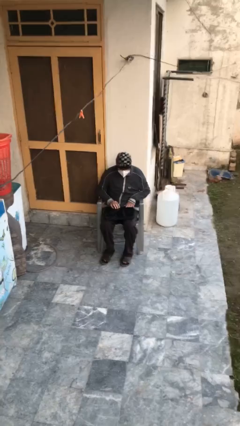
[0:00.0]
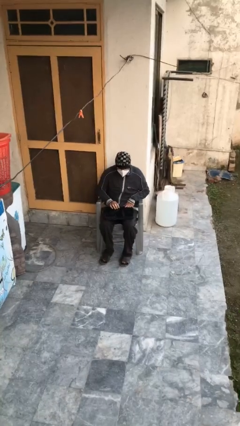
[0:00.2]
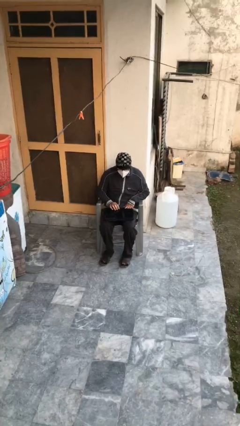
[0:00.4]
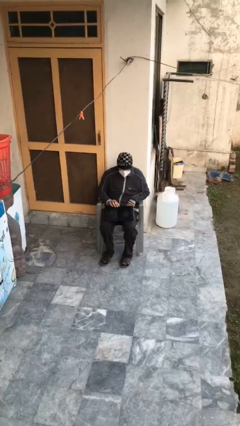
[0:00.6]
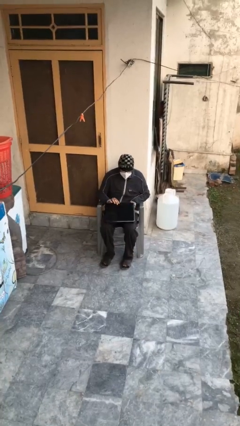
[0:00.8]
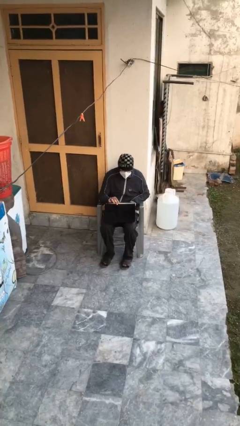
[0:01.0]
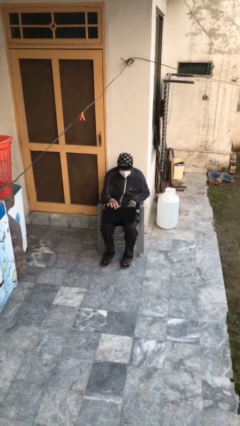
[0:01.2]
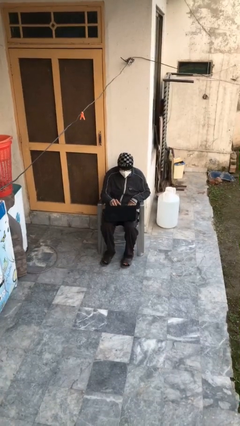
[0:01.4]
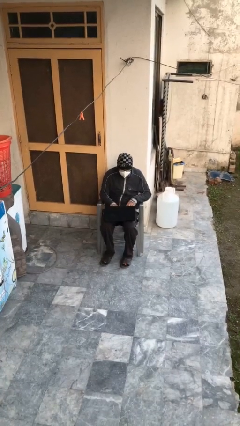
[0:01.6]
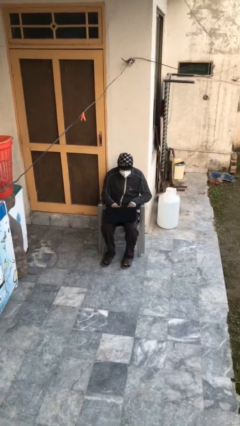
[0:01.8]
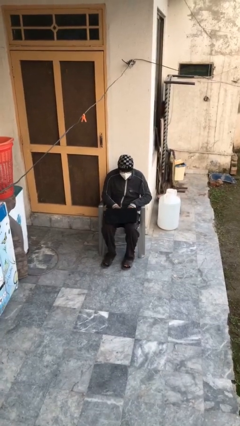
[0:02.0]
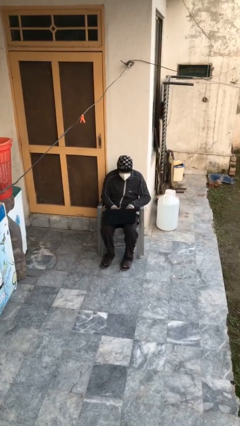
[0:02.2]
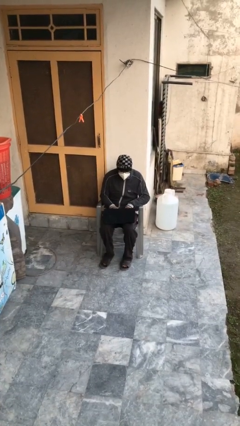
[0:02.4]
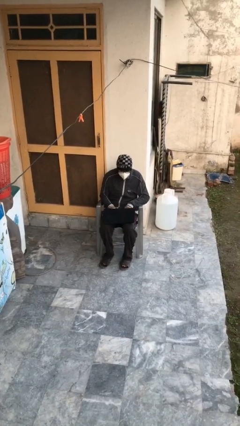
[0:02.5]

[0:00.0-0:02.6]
person interacts with laptop

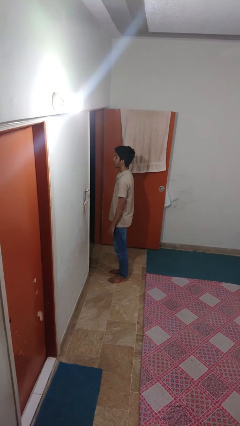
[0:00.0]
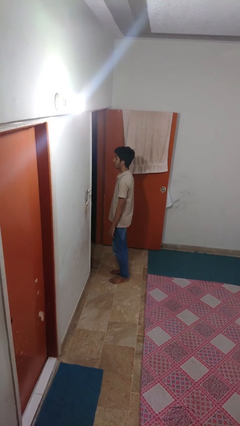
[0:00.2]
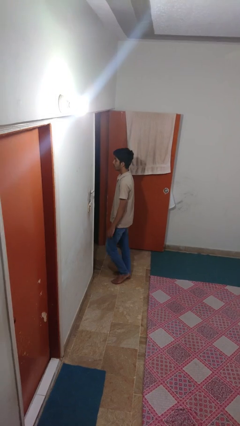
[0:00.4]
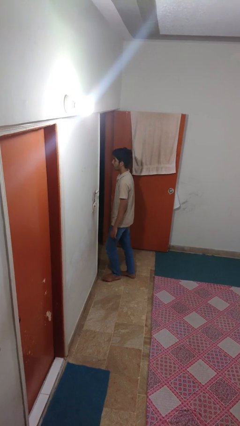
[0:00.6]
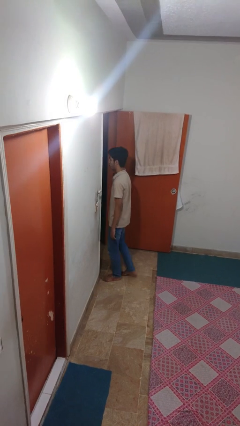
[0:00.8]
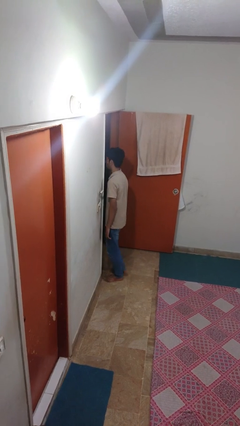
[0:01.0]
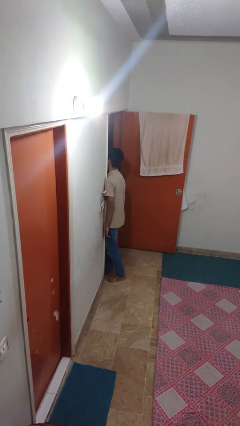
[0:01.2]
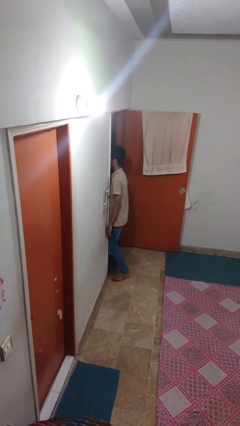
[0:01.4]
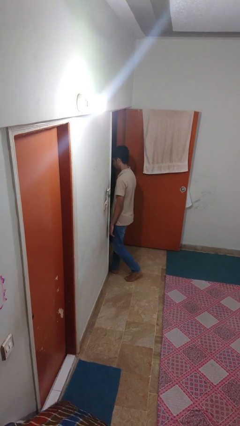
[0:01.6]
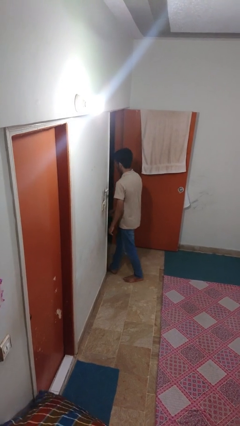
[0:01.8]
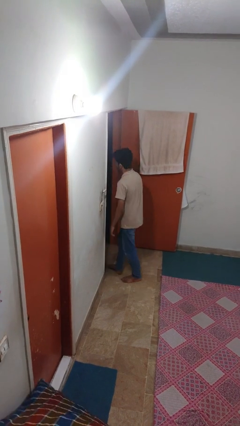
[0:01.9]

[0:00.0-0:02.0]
person bumps into wall

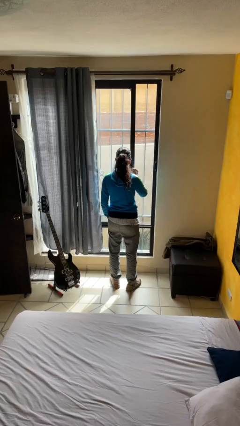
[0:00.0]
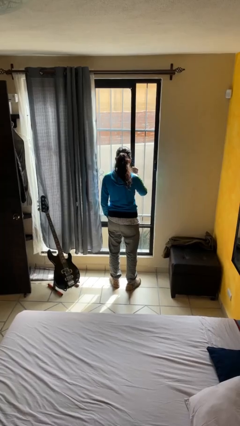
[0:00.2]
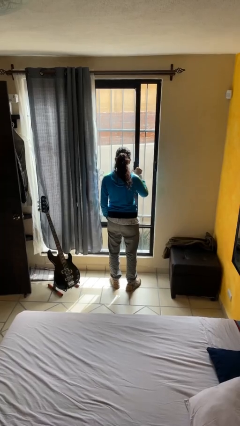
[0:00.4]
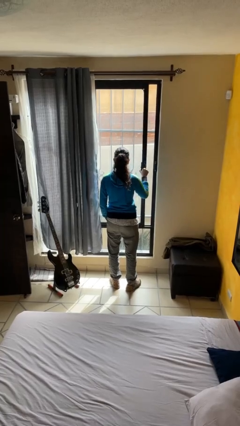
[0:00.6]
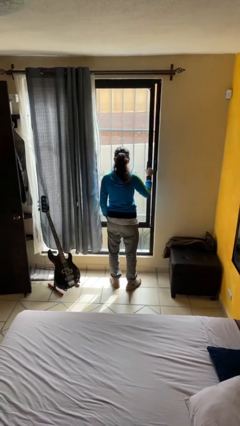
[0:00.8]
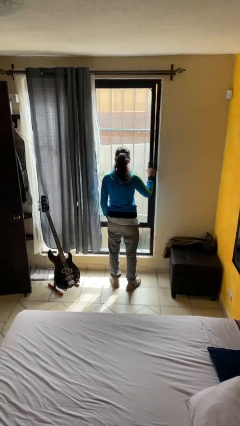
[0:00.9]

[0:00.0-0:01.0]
person closes home window

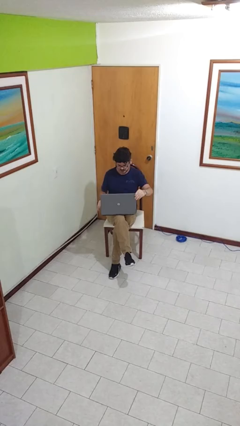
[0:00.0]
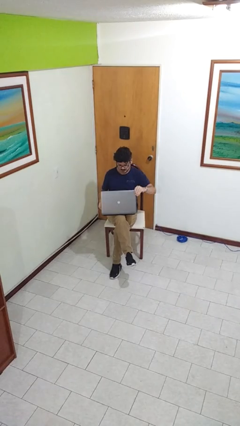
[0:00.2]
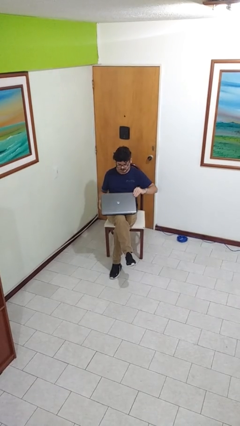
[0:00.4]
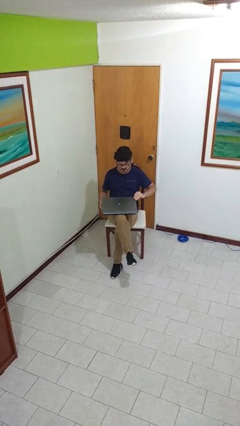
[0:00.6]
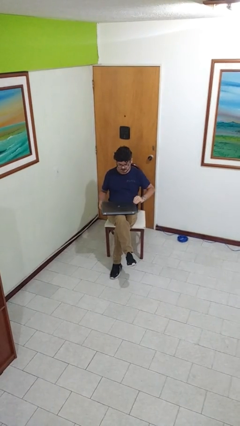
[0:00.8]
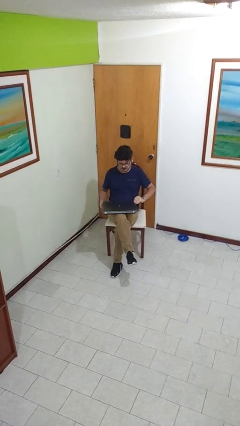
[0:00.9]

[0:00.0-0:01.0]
person closes laptop

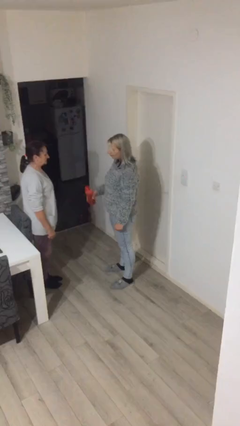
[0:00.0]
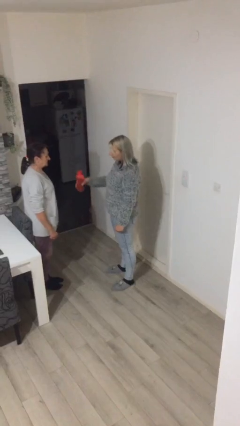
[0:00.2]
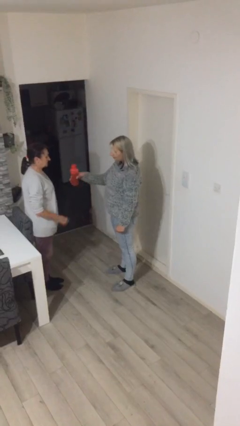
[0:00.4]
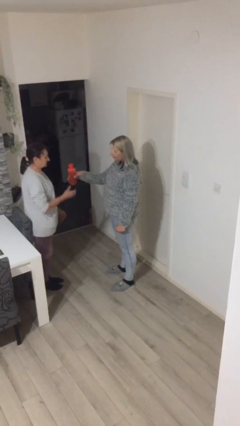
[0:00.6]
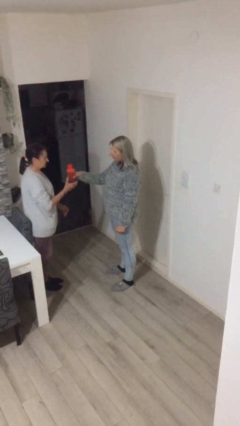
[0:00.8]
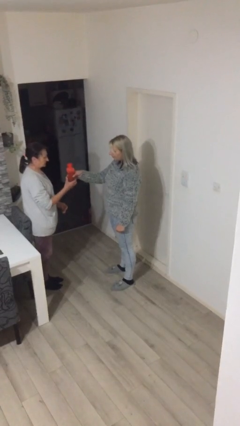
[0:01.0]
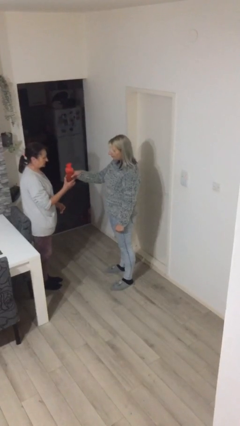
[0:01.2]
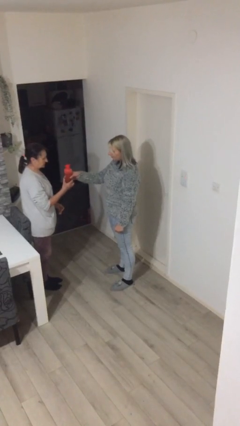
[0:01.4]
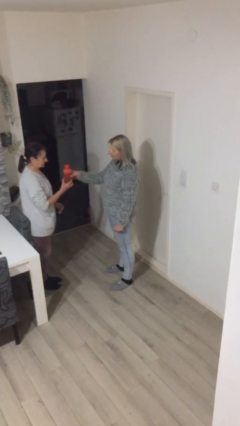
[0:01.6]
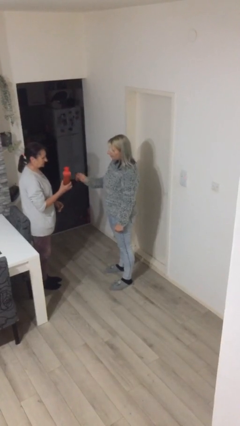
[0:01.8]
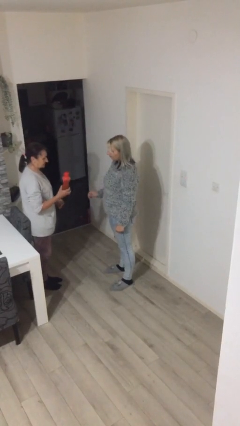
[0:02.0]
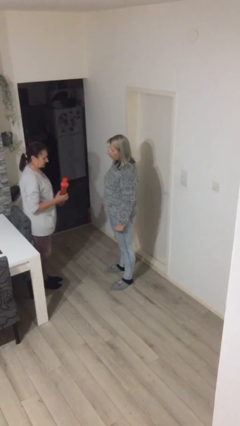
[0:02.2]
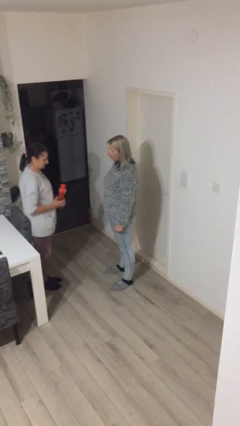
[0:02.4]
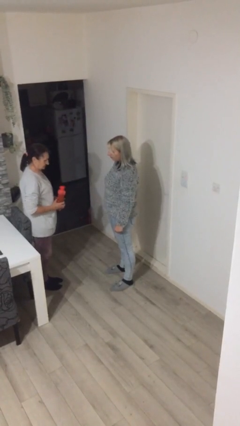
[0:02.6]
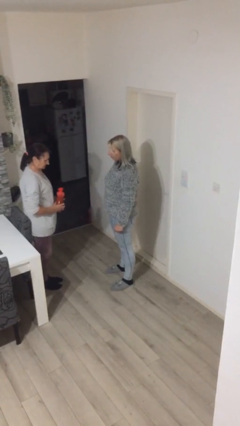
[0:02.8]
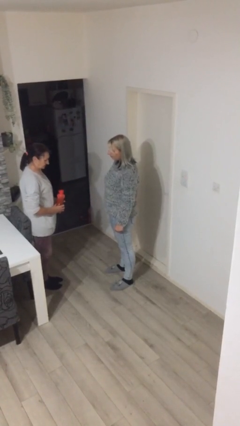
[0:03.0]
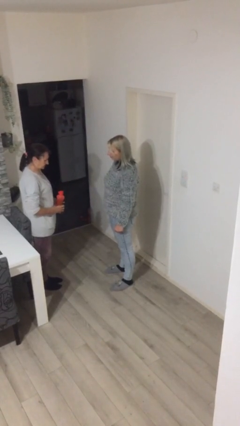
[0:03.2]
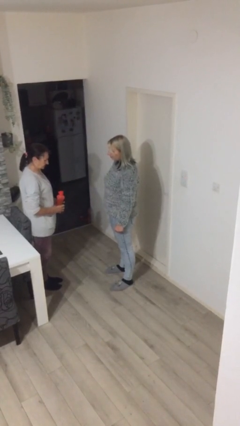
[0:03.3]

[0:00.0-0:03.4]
person transfers object to person

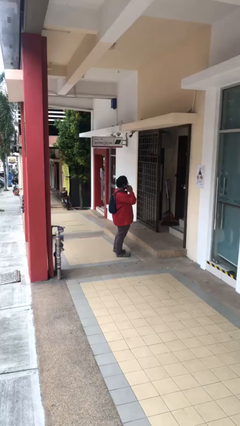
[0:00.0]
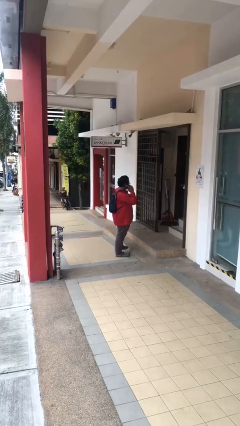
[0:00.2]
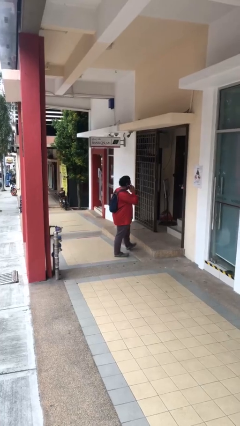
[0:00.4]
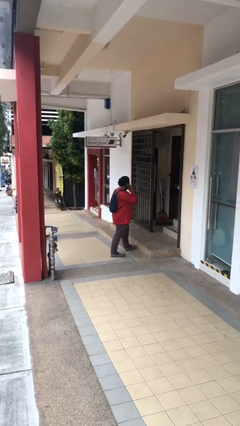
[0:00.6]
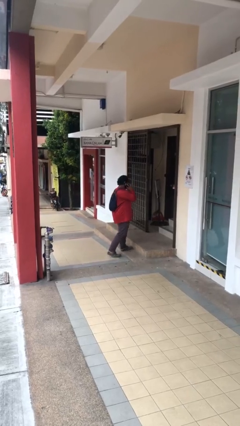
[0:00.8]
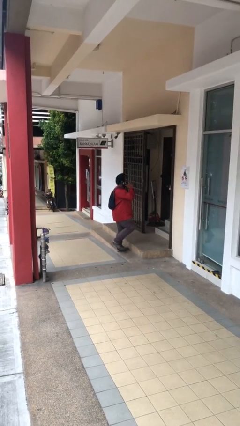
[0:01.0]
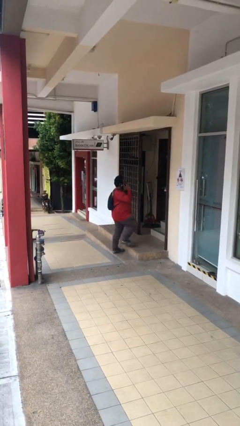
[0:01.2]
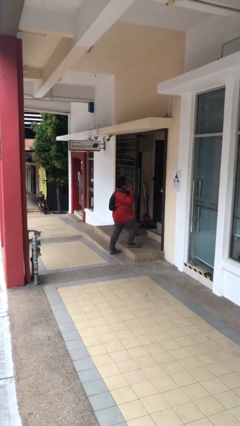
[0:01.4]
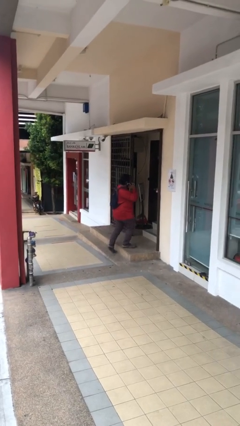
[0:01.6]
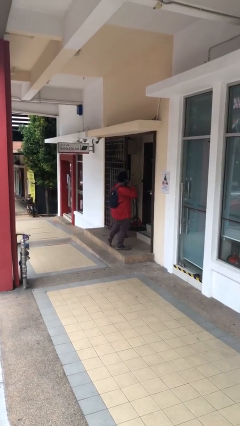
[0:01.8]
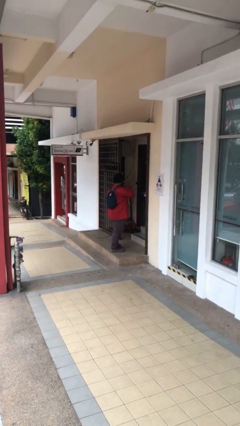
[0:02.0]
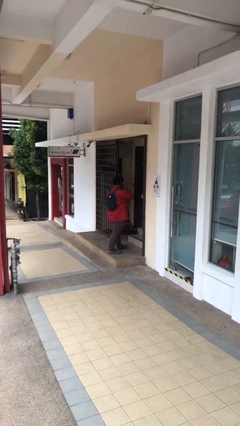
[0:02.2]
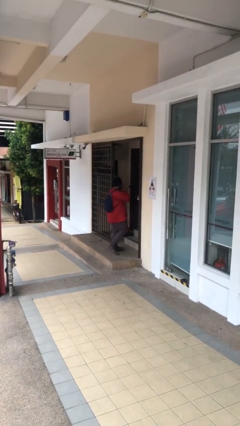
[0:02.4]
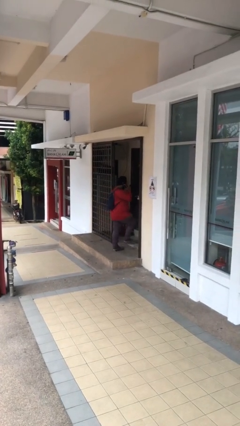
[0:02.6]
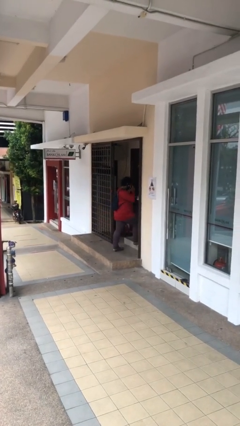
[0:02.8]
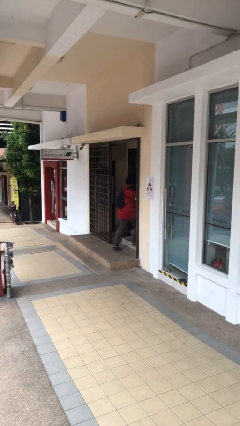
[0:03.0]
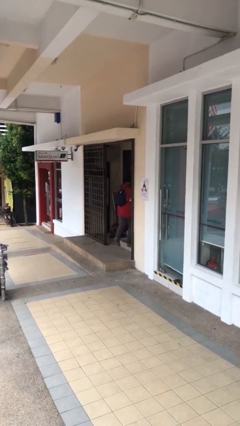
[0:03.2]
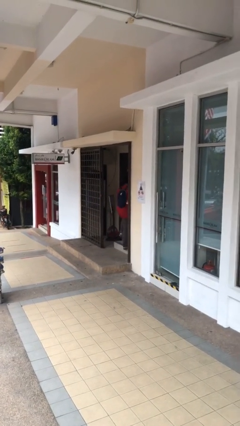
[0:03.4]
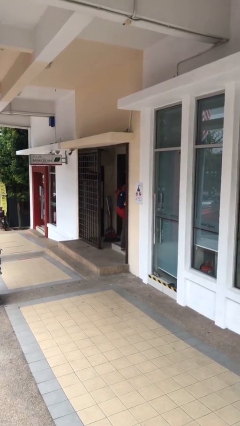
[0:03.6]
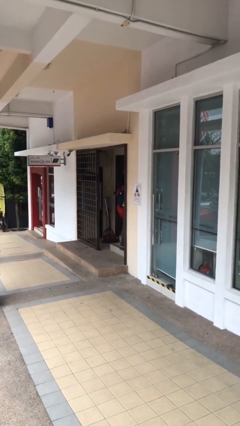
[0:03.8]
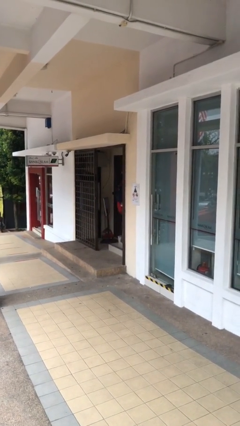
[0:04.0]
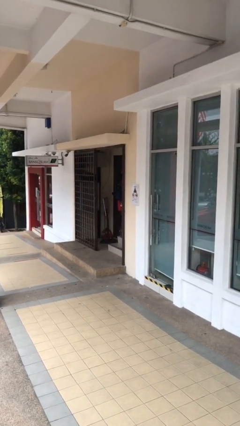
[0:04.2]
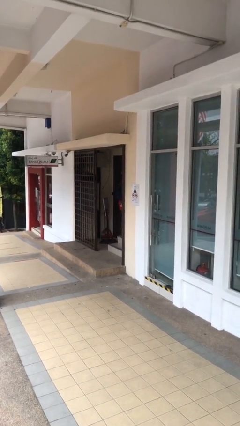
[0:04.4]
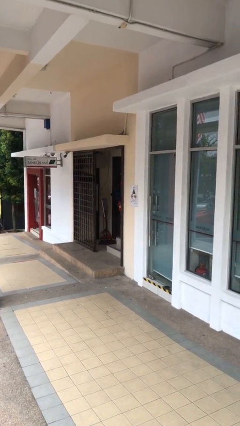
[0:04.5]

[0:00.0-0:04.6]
person exits scene through structure

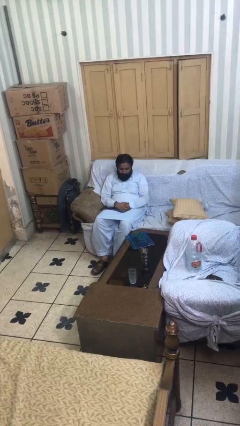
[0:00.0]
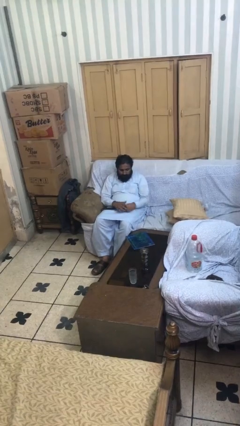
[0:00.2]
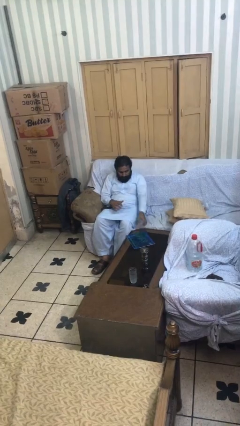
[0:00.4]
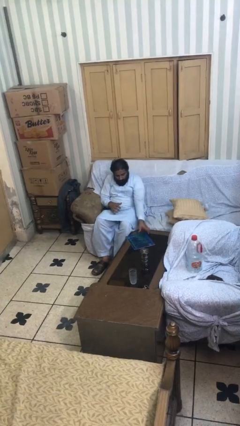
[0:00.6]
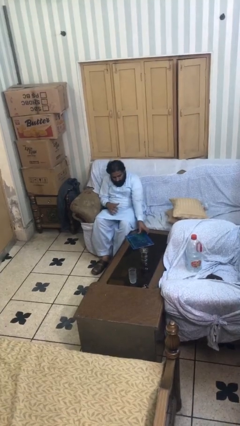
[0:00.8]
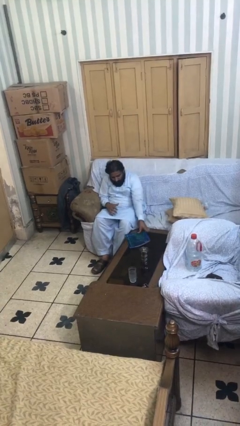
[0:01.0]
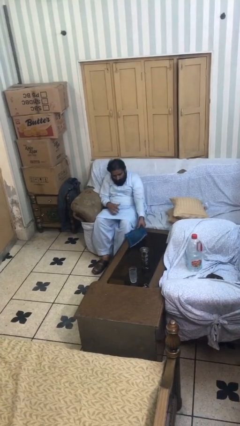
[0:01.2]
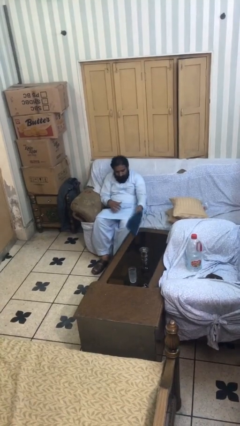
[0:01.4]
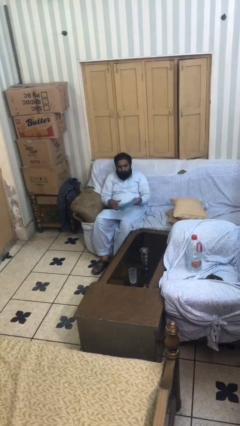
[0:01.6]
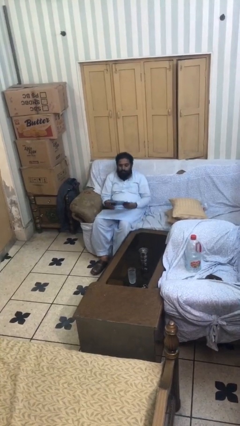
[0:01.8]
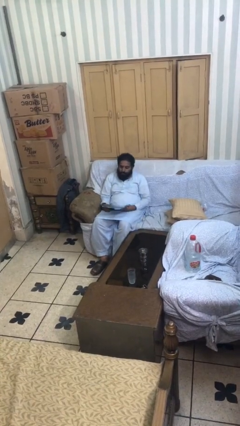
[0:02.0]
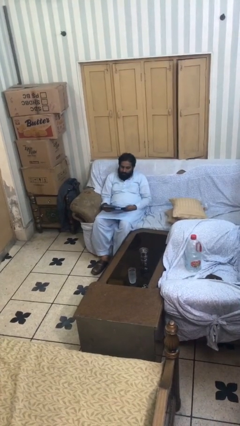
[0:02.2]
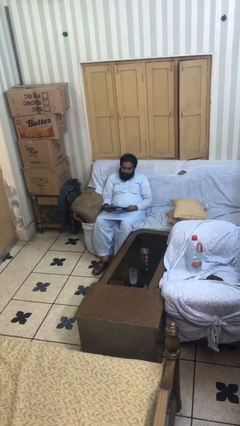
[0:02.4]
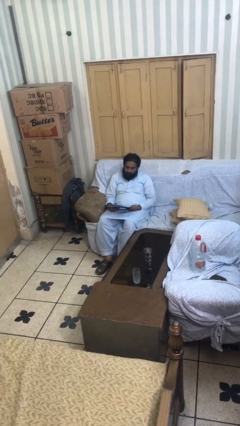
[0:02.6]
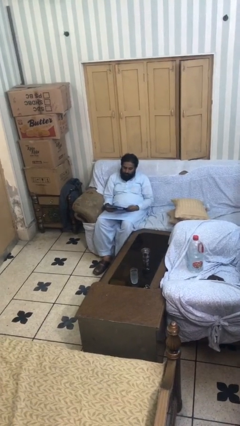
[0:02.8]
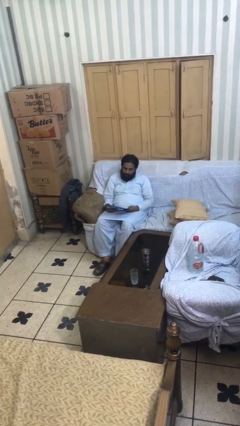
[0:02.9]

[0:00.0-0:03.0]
person picks up object from table
